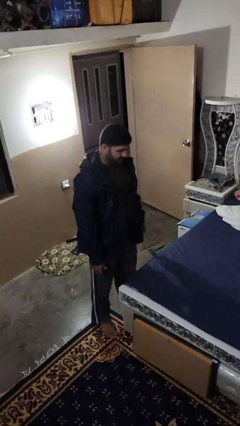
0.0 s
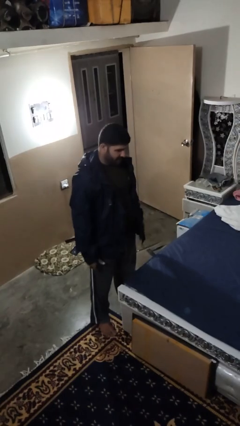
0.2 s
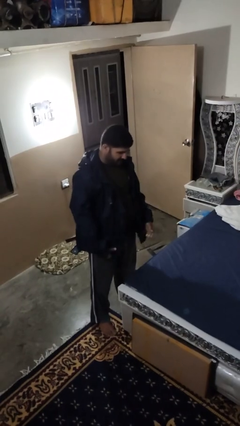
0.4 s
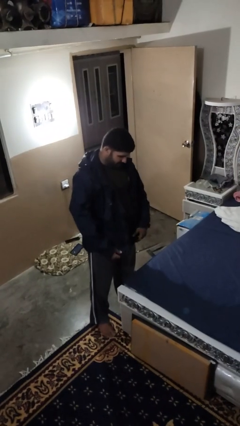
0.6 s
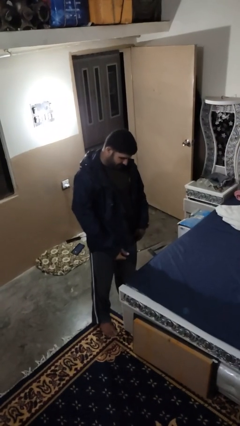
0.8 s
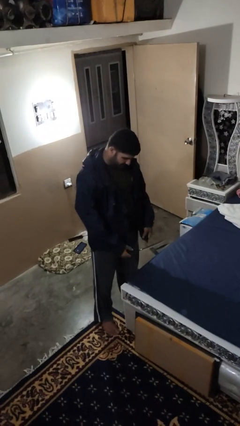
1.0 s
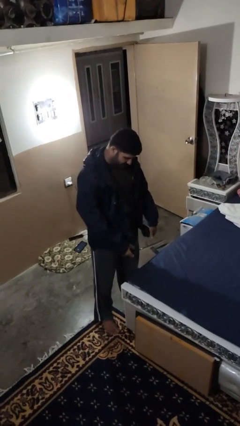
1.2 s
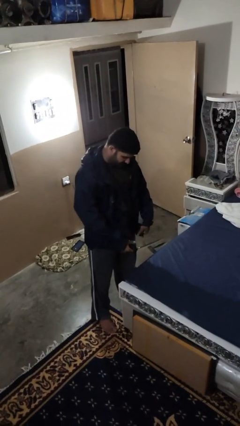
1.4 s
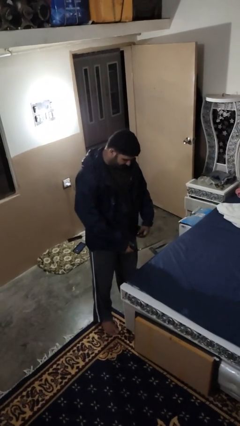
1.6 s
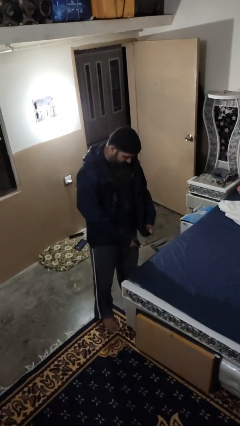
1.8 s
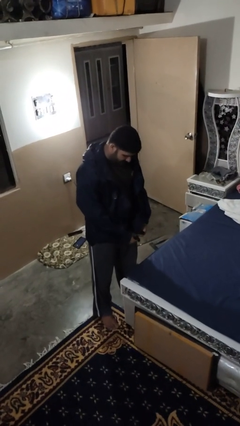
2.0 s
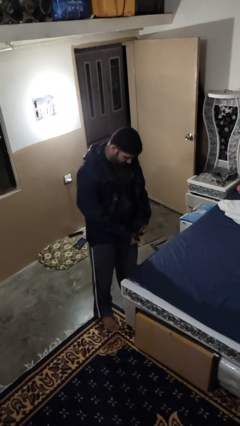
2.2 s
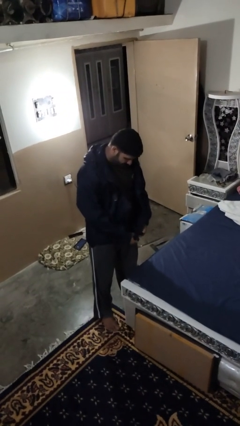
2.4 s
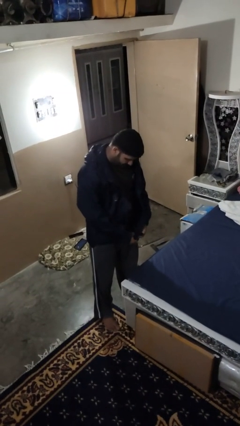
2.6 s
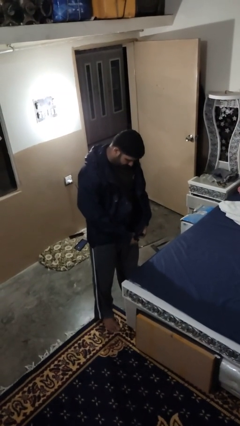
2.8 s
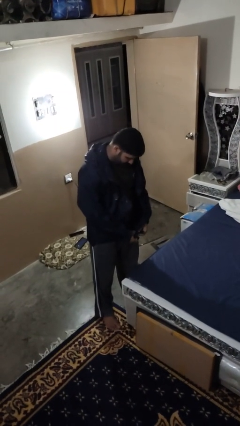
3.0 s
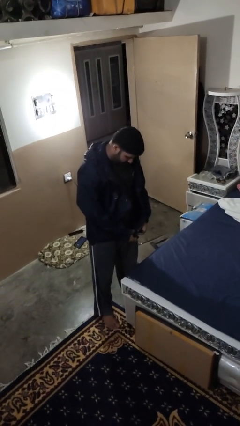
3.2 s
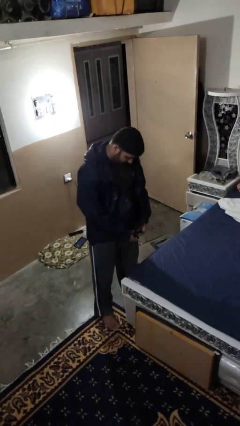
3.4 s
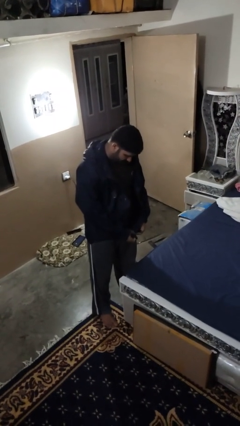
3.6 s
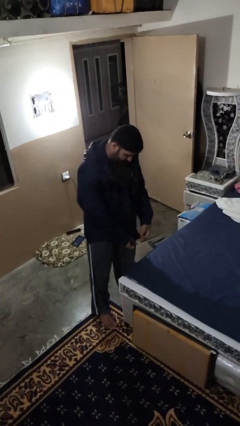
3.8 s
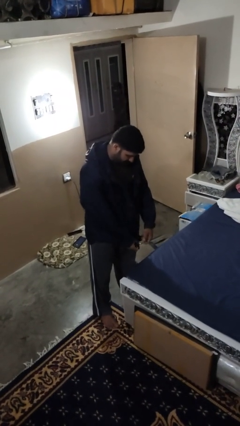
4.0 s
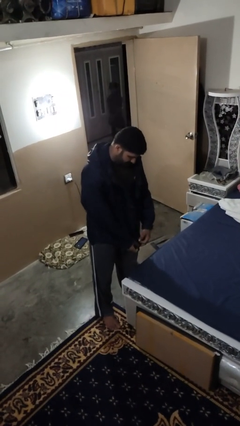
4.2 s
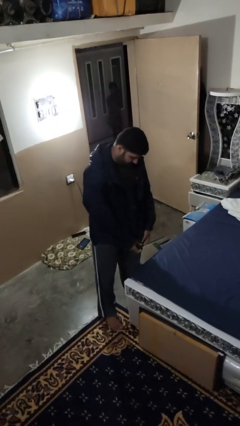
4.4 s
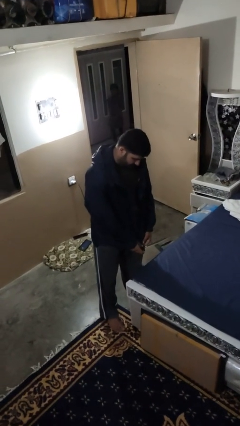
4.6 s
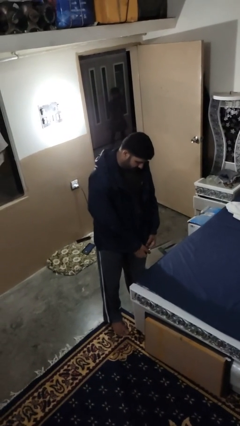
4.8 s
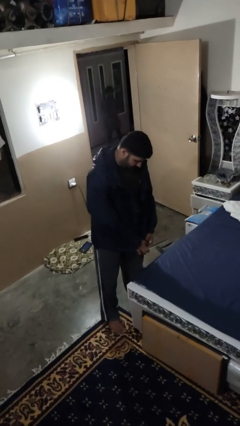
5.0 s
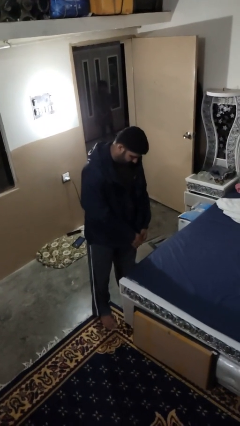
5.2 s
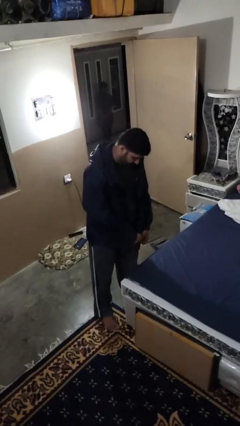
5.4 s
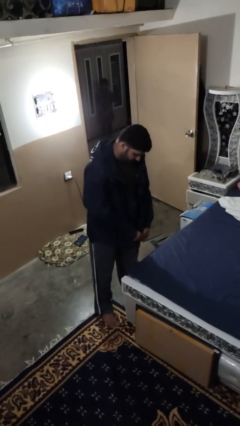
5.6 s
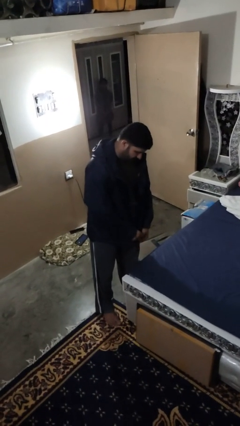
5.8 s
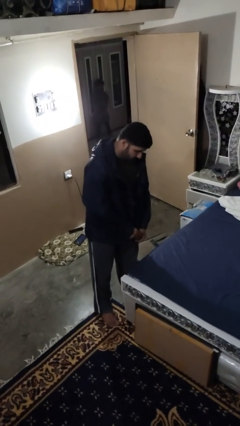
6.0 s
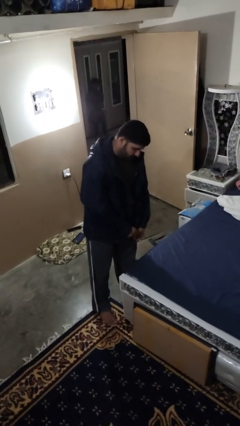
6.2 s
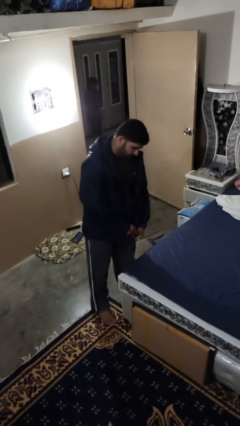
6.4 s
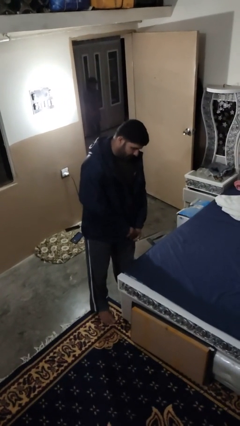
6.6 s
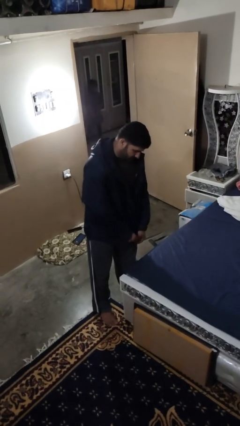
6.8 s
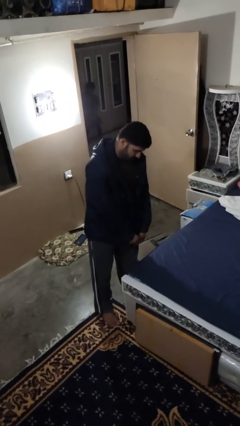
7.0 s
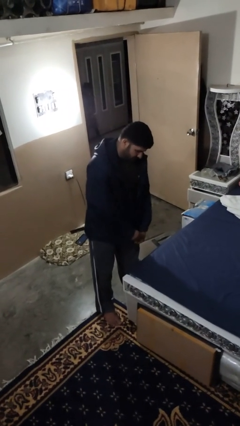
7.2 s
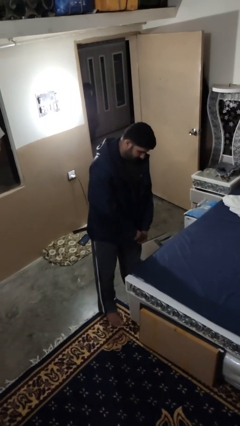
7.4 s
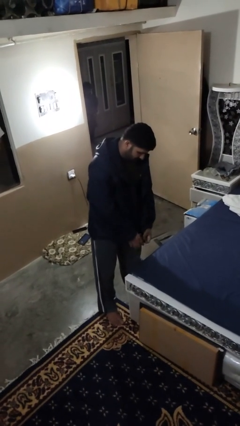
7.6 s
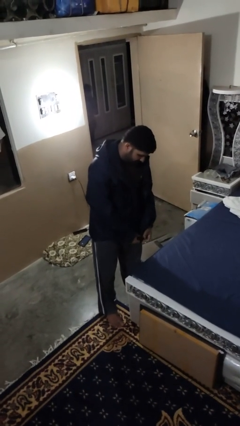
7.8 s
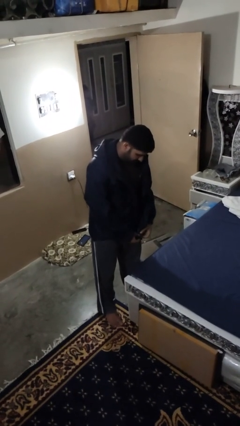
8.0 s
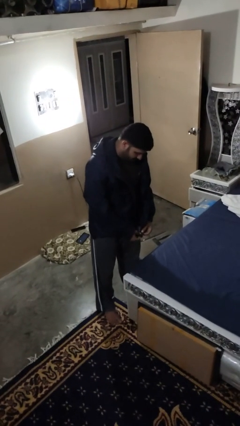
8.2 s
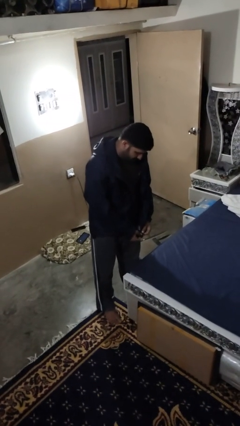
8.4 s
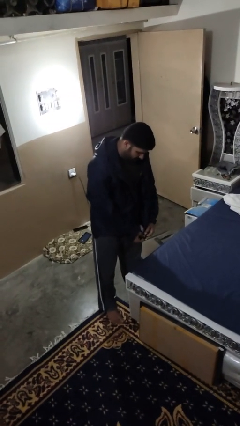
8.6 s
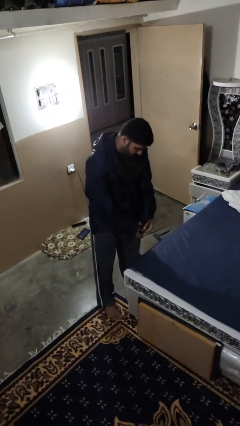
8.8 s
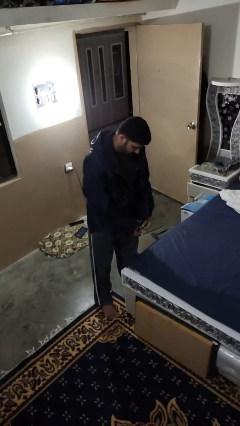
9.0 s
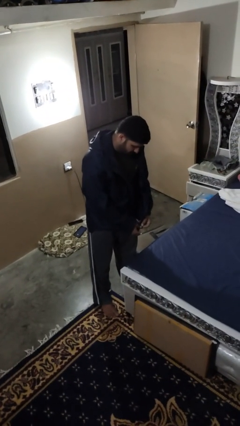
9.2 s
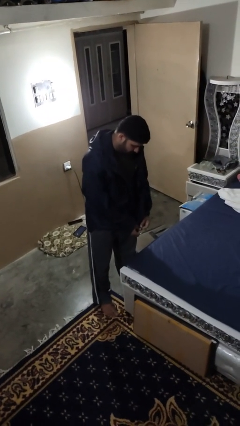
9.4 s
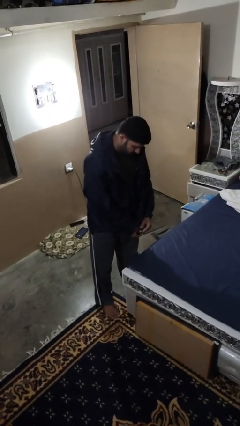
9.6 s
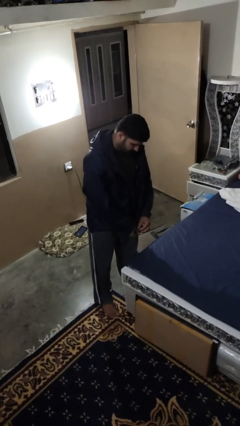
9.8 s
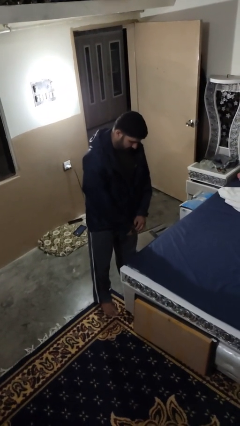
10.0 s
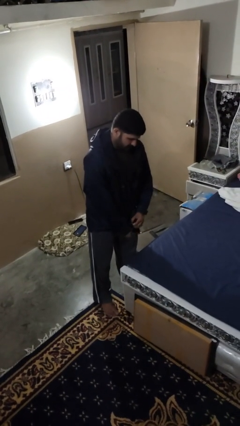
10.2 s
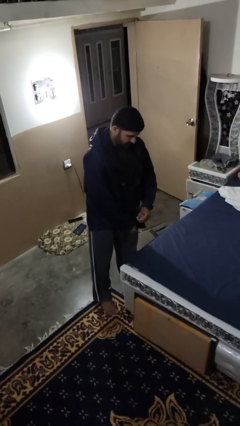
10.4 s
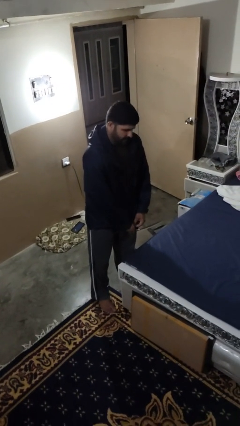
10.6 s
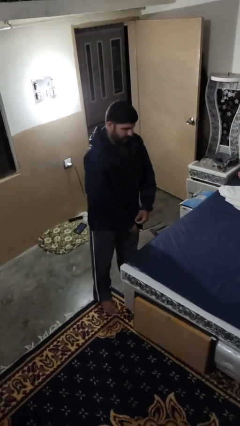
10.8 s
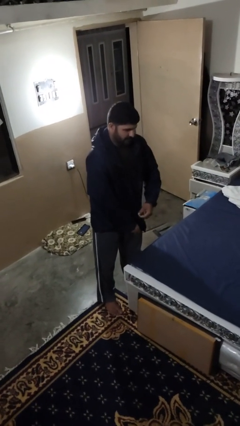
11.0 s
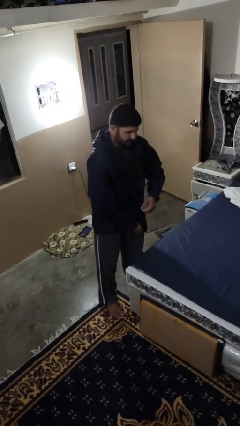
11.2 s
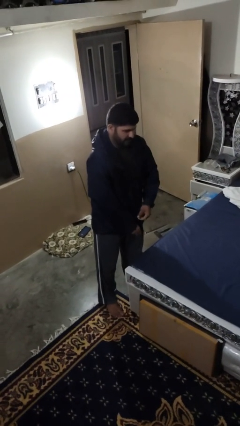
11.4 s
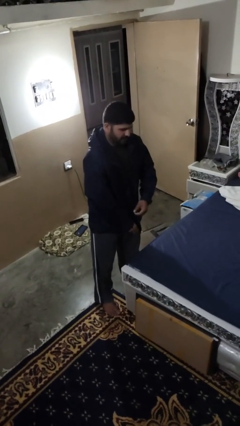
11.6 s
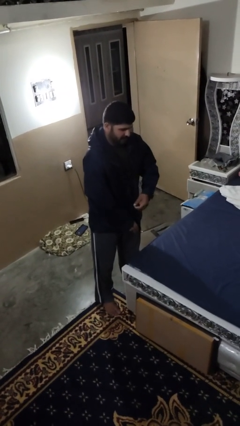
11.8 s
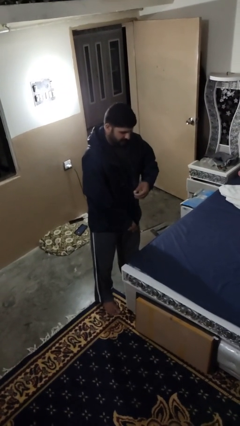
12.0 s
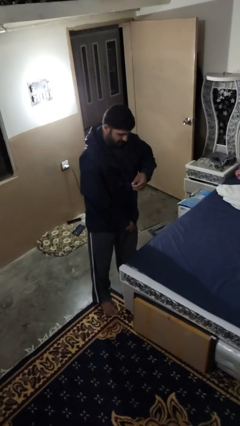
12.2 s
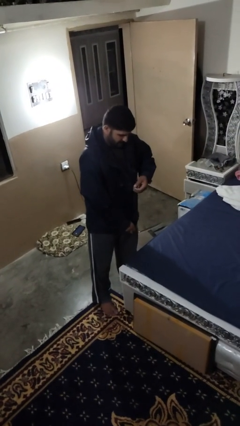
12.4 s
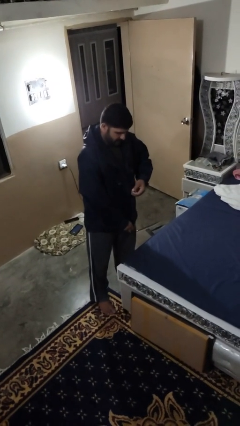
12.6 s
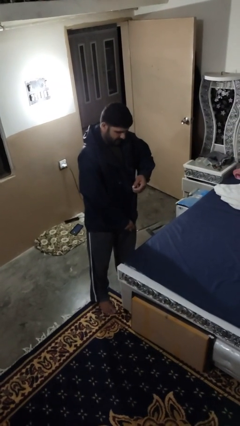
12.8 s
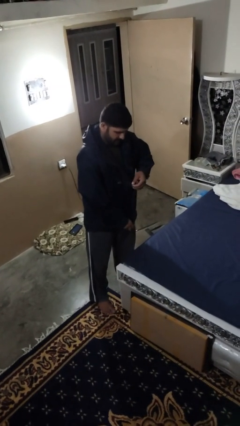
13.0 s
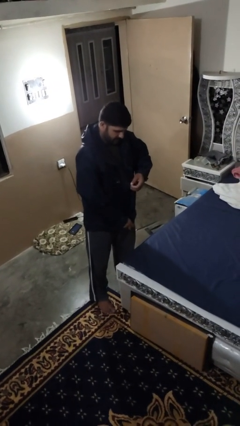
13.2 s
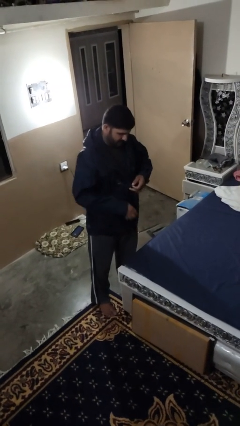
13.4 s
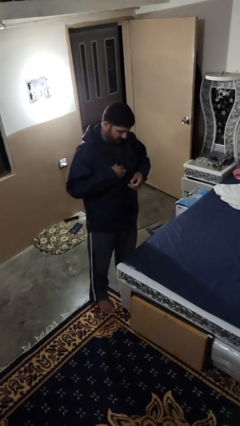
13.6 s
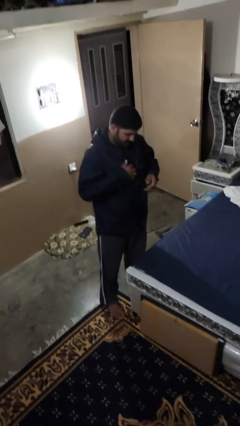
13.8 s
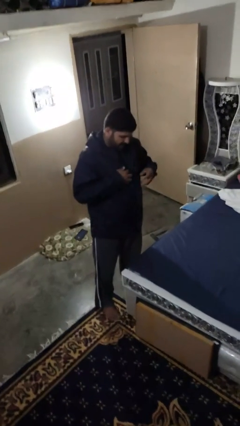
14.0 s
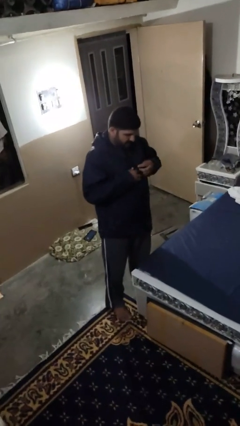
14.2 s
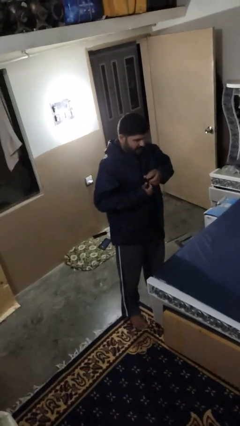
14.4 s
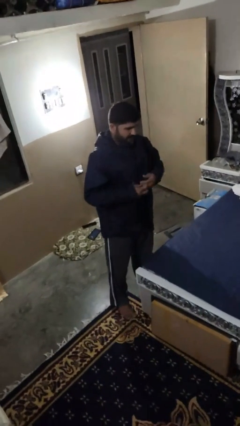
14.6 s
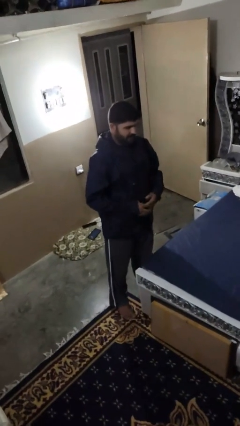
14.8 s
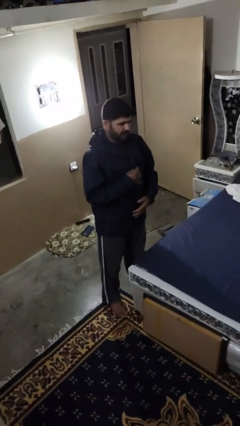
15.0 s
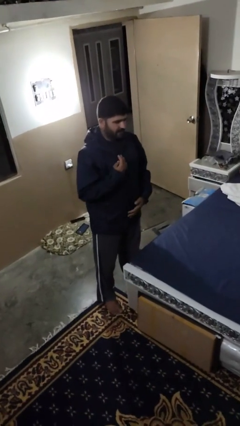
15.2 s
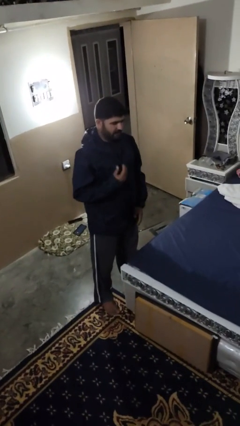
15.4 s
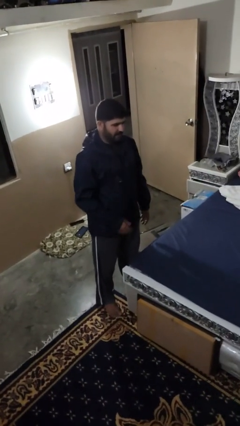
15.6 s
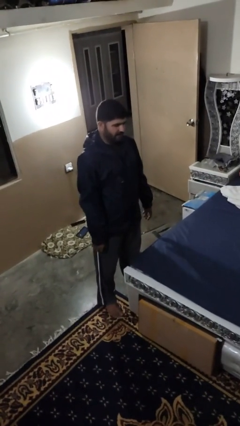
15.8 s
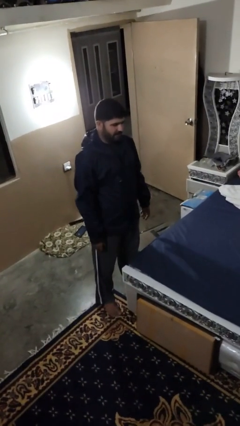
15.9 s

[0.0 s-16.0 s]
person zips up jacket

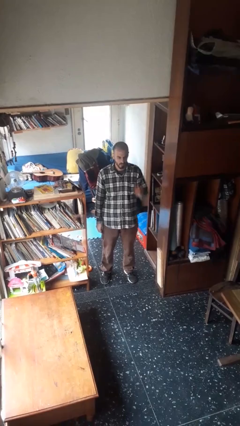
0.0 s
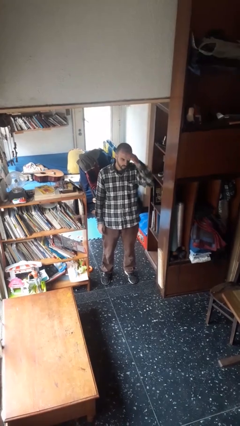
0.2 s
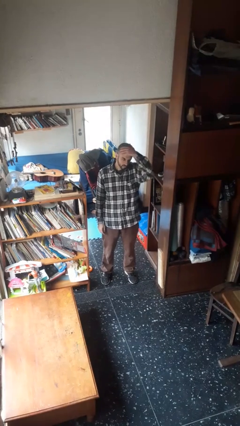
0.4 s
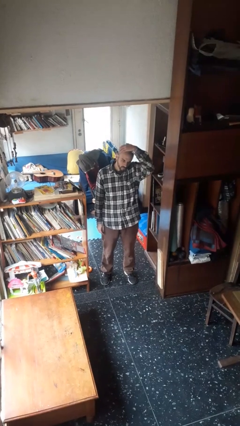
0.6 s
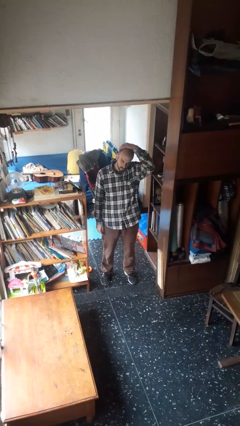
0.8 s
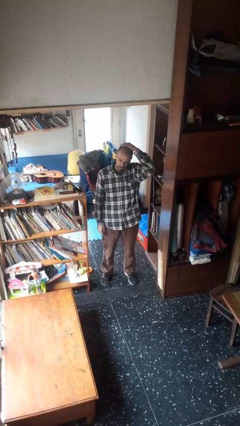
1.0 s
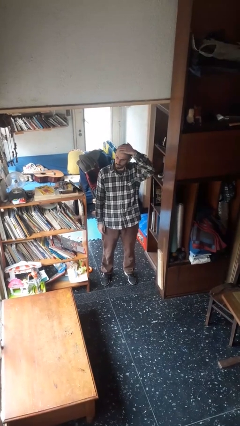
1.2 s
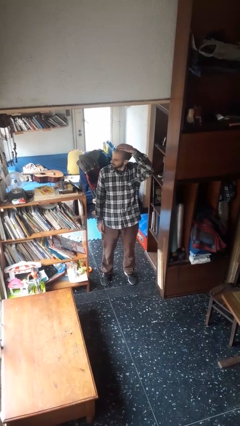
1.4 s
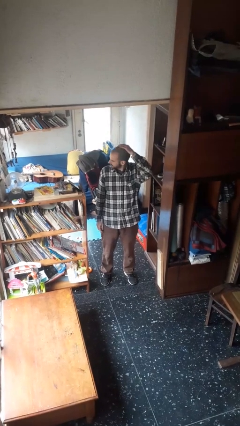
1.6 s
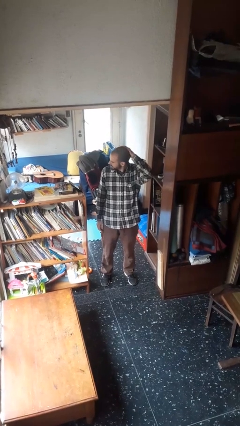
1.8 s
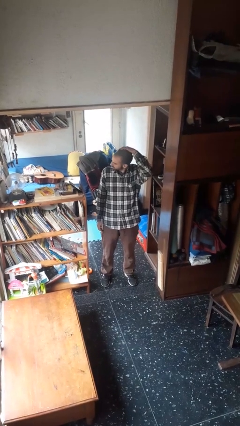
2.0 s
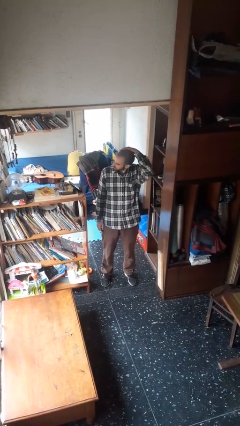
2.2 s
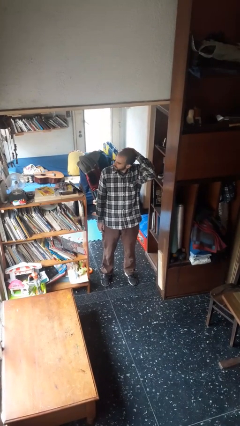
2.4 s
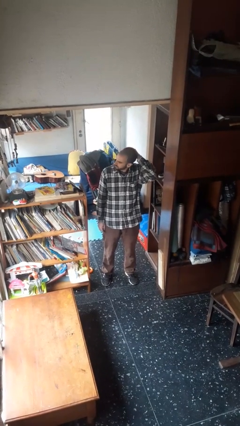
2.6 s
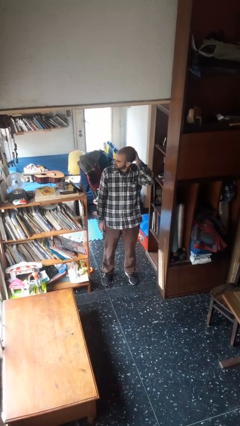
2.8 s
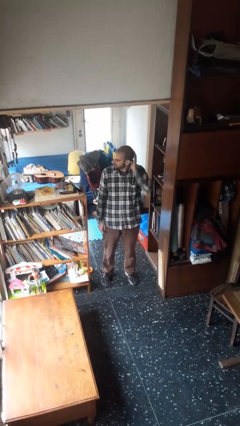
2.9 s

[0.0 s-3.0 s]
person pats head
